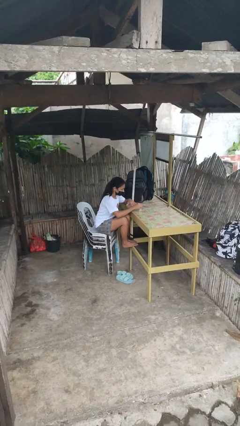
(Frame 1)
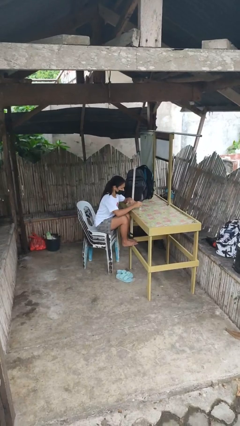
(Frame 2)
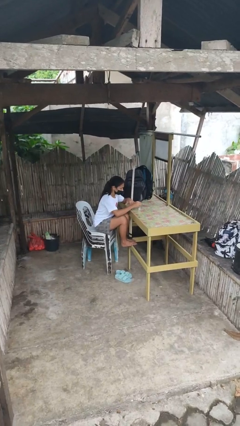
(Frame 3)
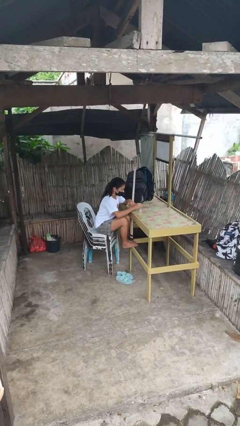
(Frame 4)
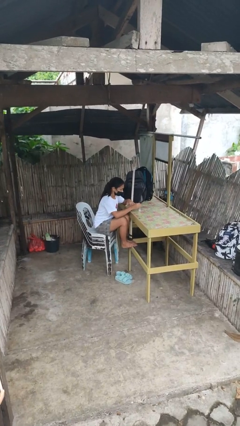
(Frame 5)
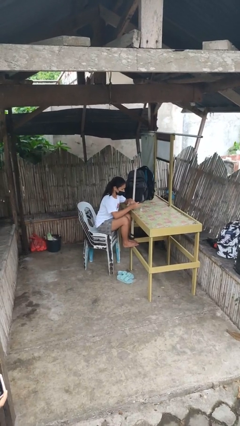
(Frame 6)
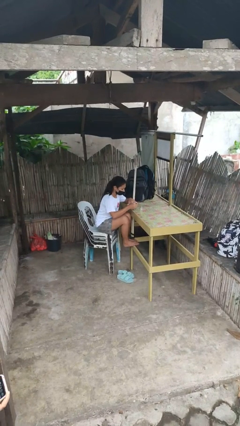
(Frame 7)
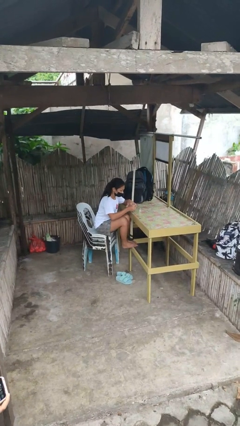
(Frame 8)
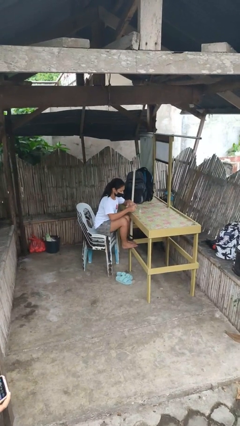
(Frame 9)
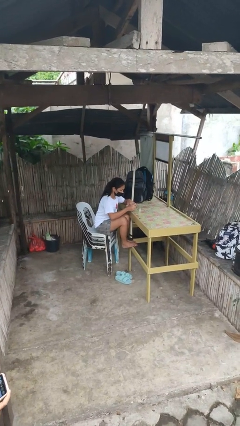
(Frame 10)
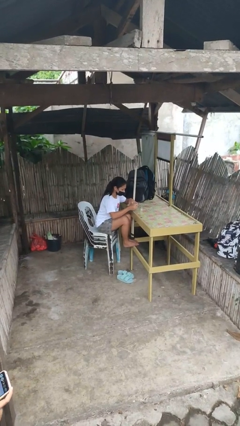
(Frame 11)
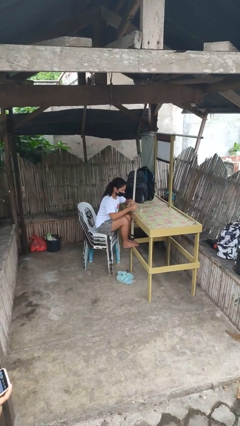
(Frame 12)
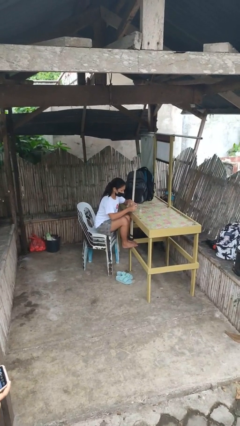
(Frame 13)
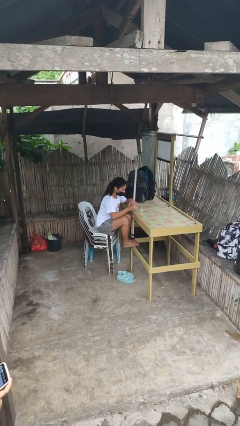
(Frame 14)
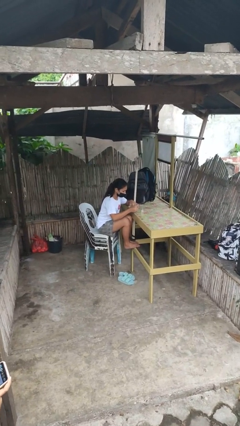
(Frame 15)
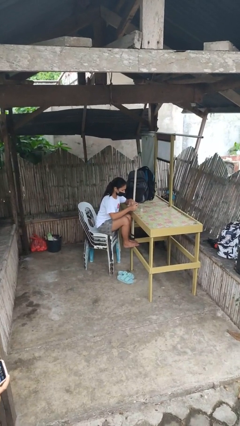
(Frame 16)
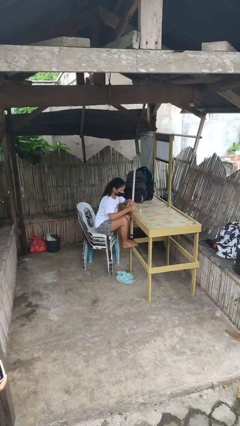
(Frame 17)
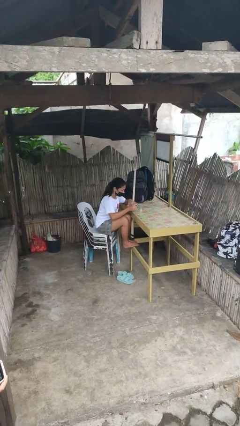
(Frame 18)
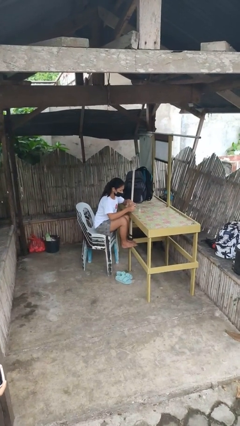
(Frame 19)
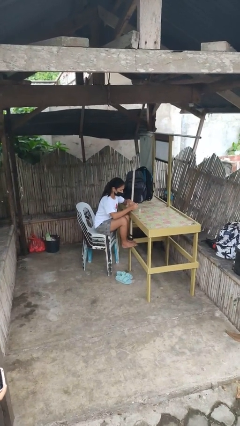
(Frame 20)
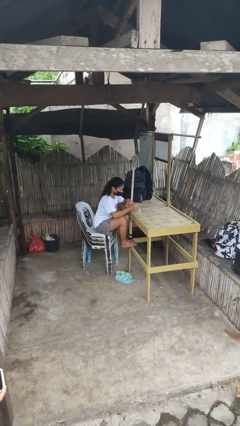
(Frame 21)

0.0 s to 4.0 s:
person paints fingernails

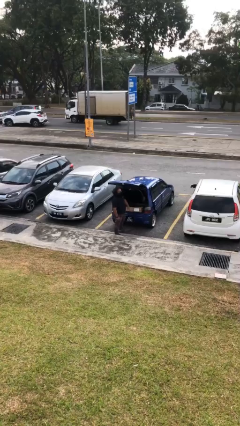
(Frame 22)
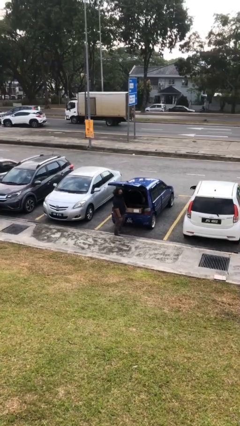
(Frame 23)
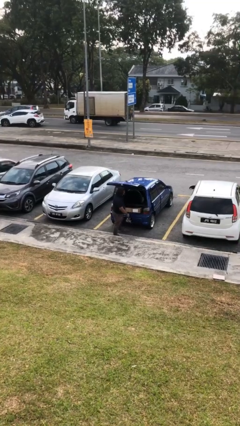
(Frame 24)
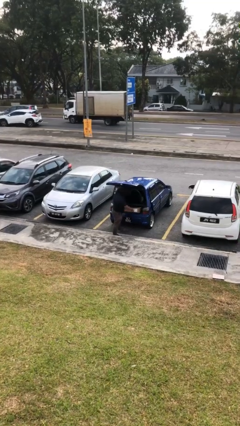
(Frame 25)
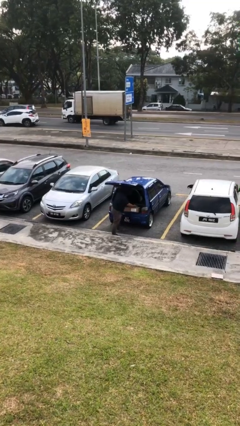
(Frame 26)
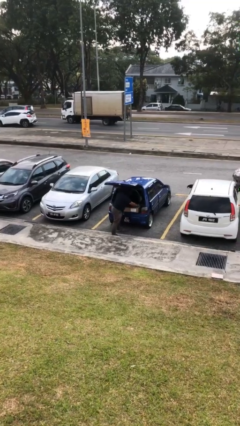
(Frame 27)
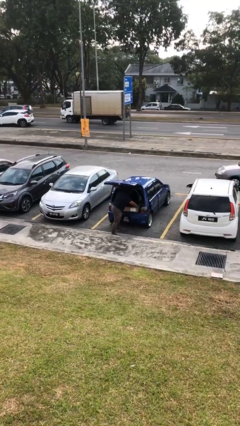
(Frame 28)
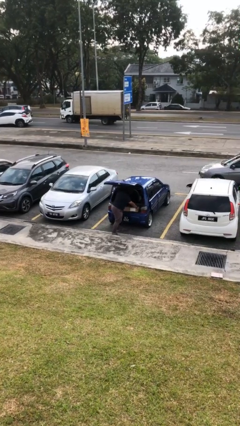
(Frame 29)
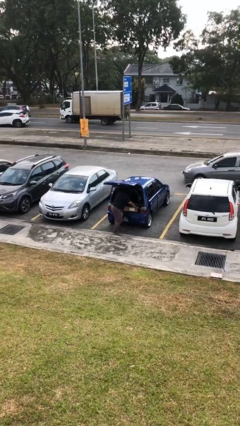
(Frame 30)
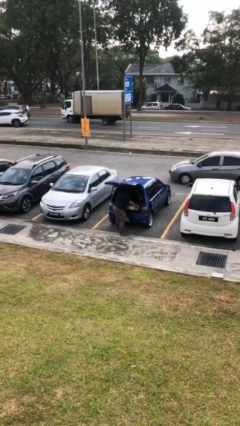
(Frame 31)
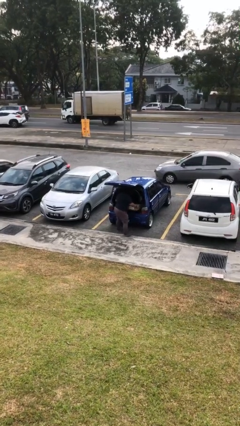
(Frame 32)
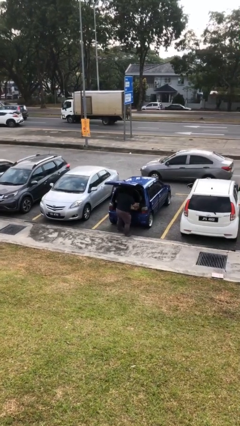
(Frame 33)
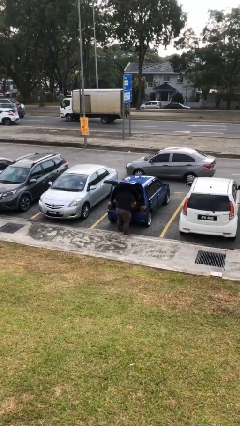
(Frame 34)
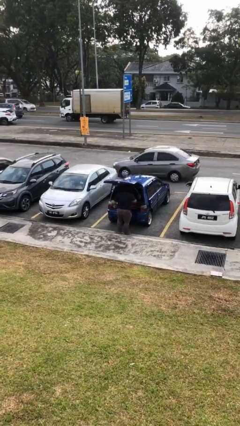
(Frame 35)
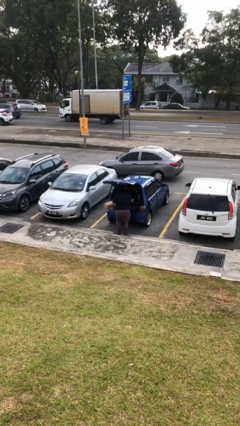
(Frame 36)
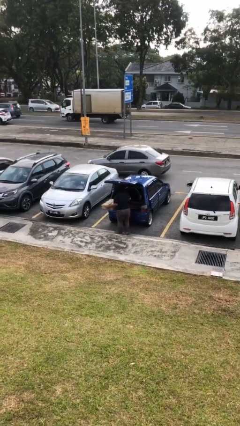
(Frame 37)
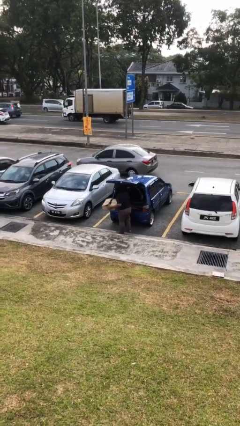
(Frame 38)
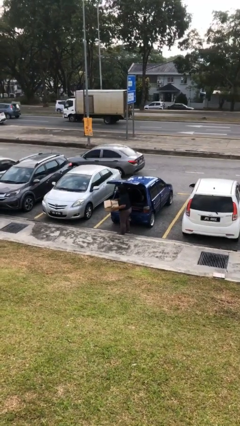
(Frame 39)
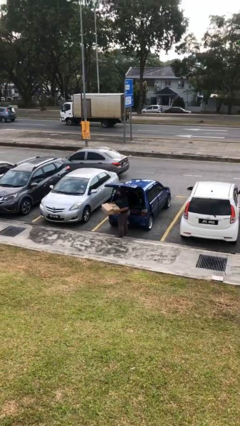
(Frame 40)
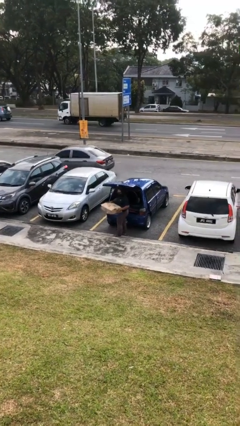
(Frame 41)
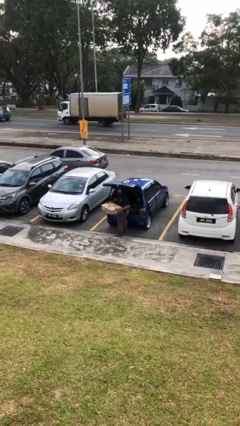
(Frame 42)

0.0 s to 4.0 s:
person unloads car

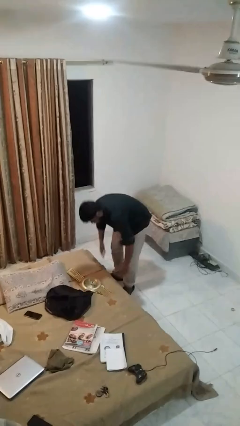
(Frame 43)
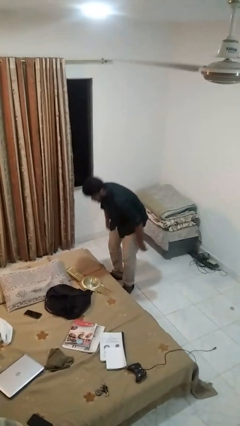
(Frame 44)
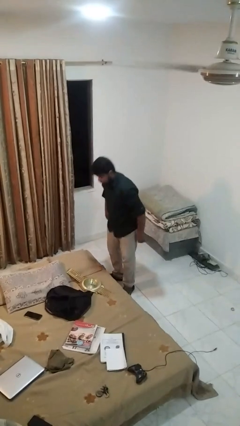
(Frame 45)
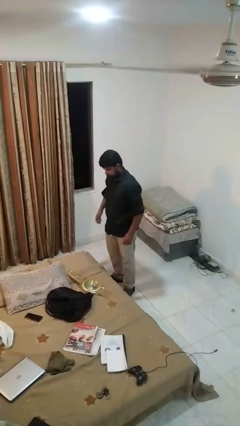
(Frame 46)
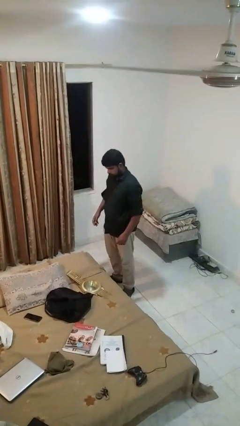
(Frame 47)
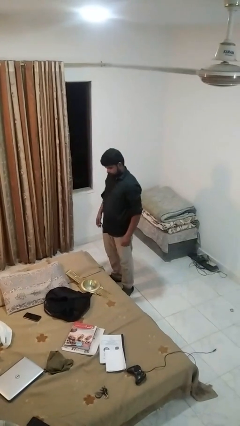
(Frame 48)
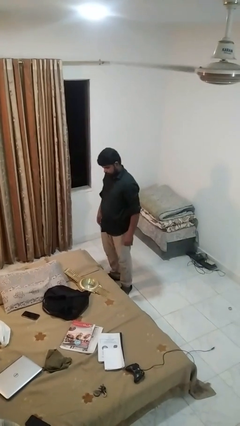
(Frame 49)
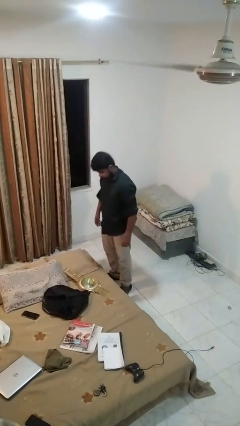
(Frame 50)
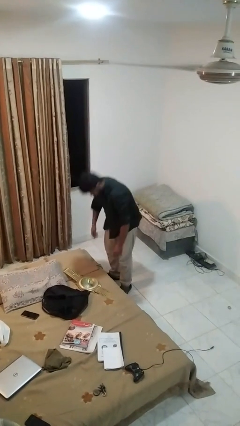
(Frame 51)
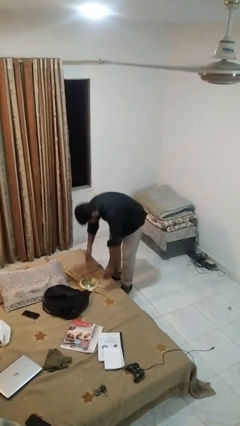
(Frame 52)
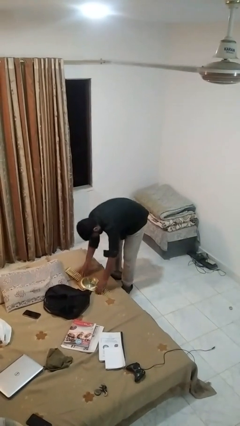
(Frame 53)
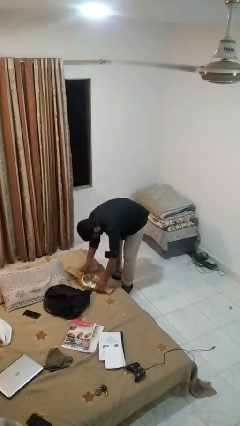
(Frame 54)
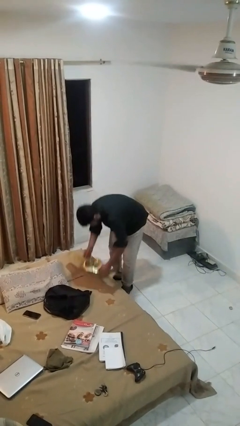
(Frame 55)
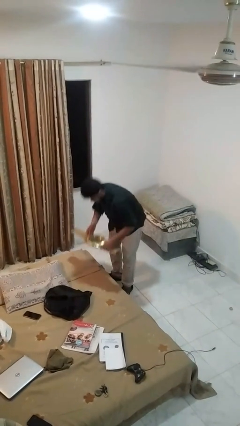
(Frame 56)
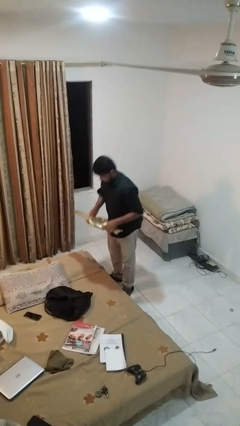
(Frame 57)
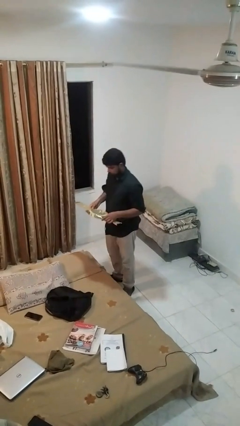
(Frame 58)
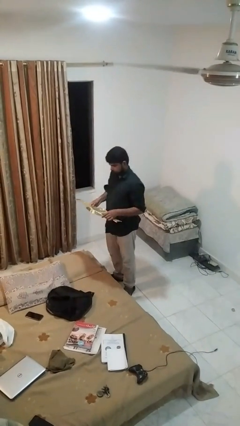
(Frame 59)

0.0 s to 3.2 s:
person picks up object from bed

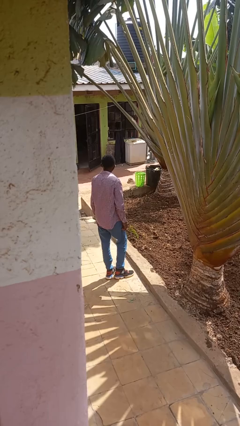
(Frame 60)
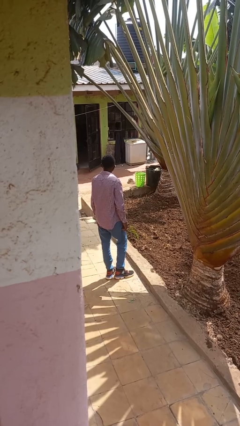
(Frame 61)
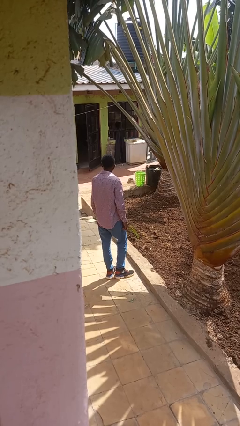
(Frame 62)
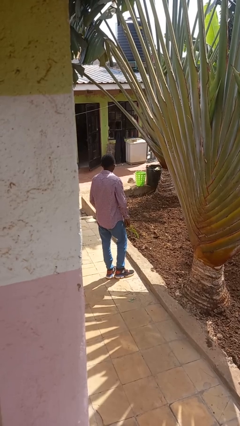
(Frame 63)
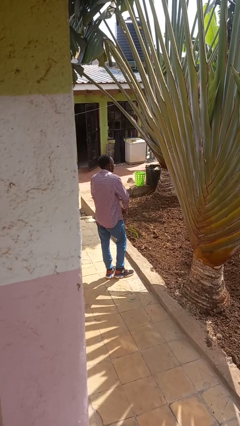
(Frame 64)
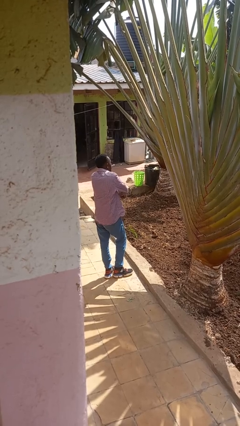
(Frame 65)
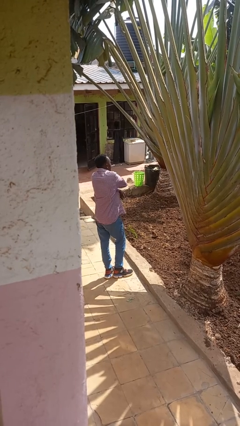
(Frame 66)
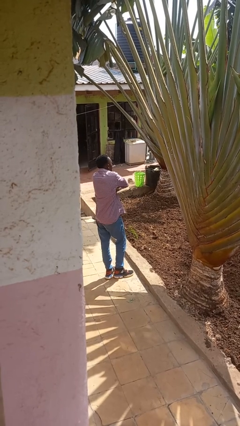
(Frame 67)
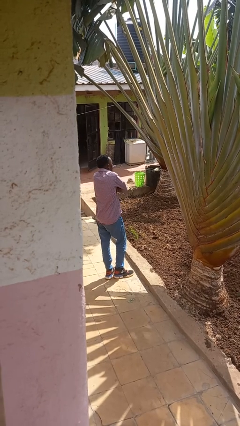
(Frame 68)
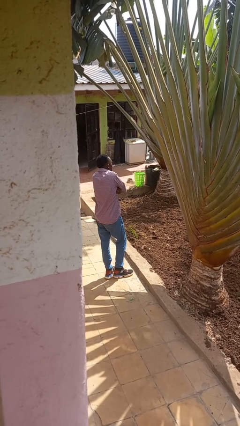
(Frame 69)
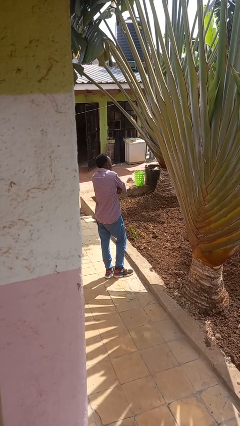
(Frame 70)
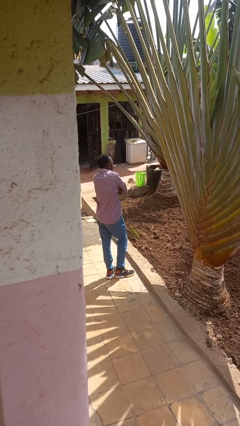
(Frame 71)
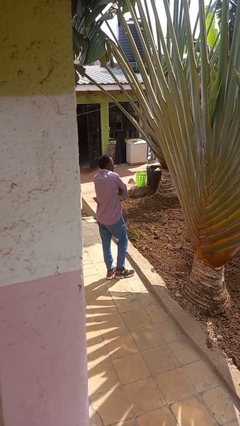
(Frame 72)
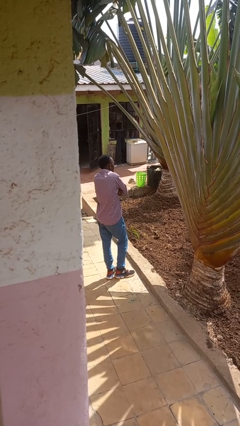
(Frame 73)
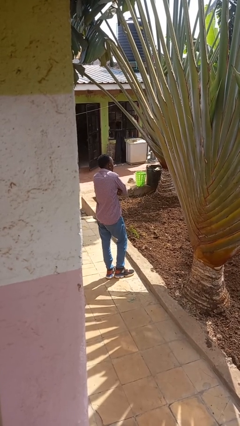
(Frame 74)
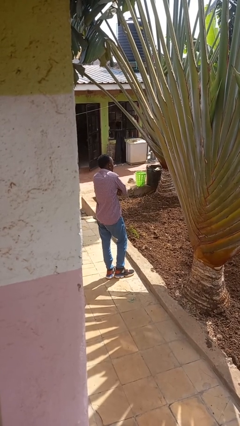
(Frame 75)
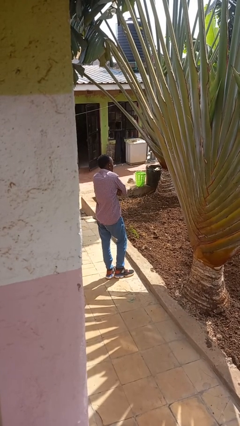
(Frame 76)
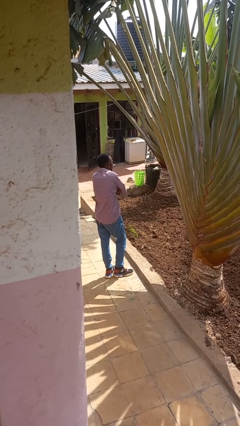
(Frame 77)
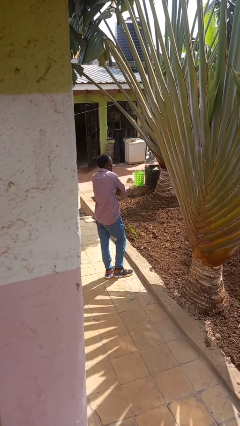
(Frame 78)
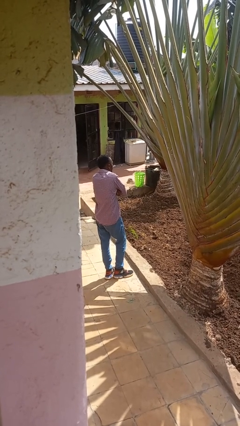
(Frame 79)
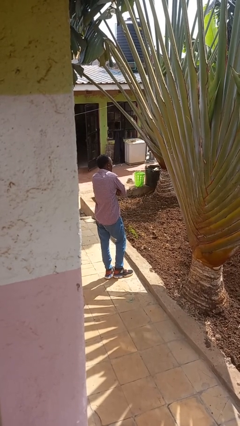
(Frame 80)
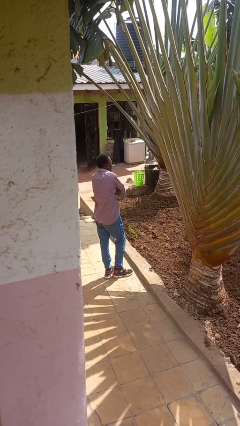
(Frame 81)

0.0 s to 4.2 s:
person crosses arms

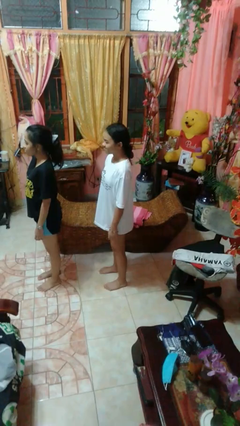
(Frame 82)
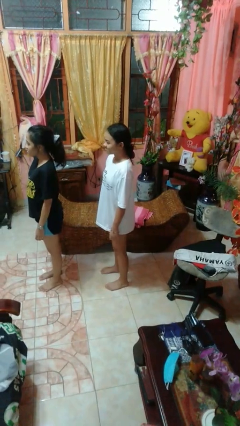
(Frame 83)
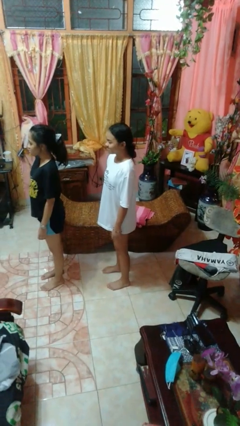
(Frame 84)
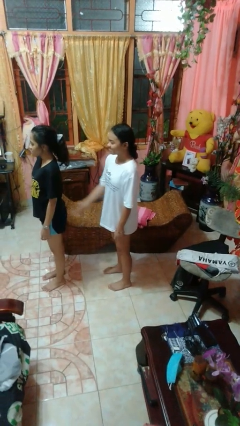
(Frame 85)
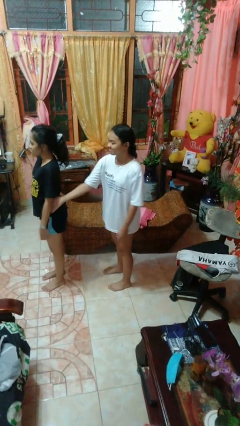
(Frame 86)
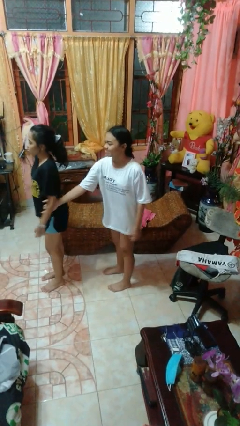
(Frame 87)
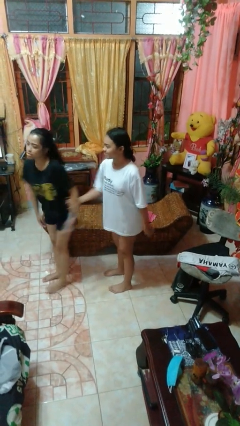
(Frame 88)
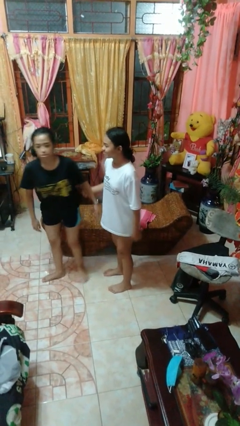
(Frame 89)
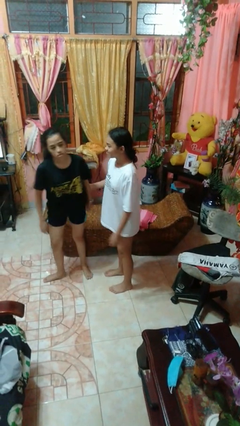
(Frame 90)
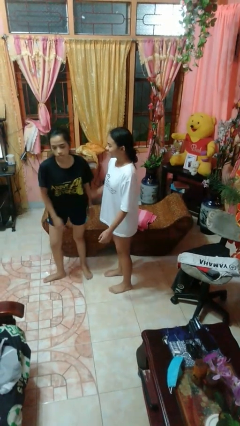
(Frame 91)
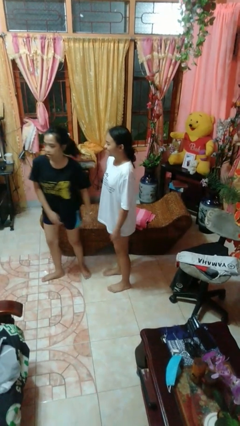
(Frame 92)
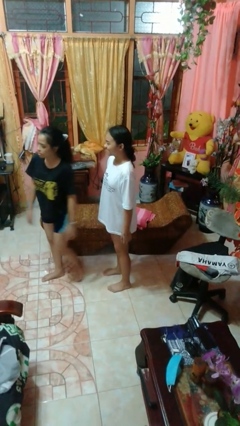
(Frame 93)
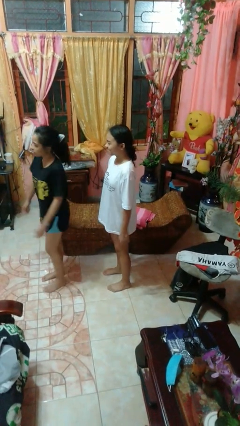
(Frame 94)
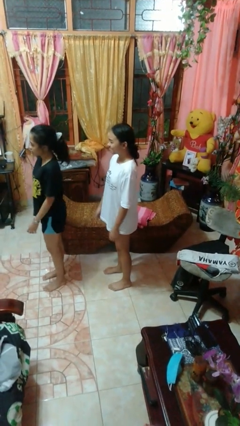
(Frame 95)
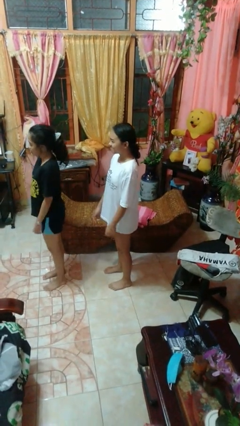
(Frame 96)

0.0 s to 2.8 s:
person grabs person by forearm
